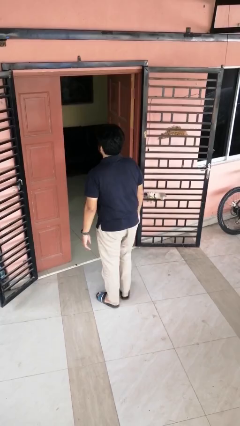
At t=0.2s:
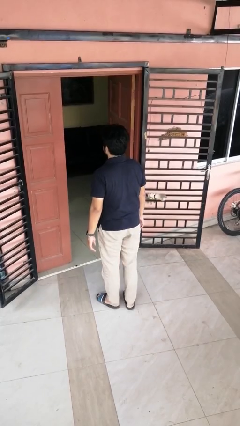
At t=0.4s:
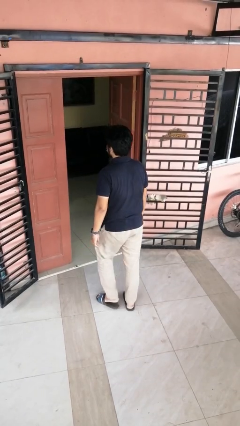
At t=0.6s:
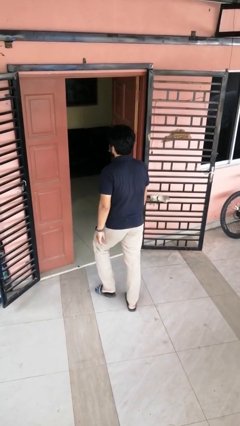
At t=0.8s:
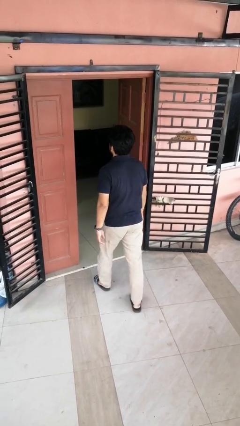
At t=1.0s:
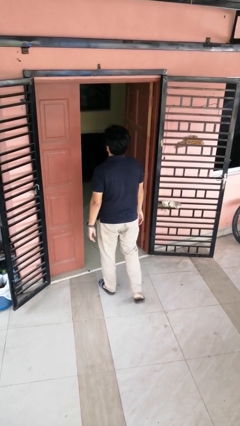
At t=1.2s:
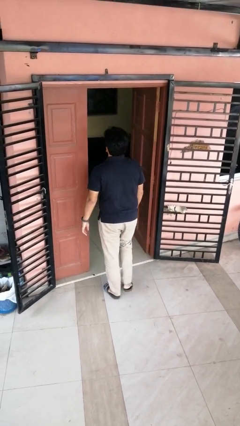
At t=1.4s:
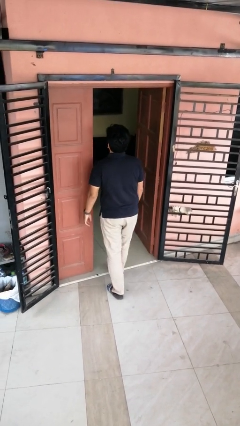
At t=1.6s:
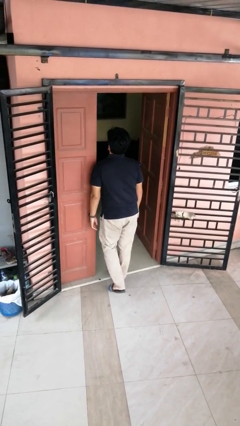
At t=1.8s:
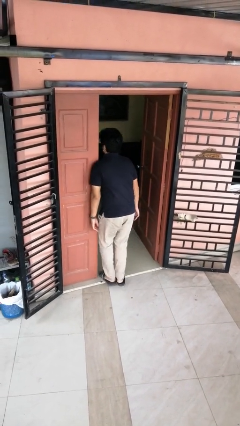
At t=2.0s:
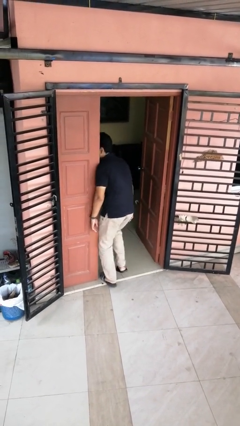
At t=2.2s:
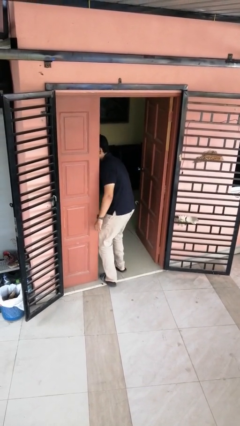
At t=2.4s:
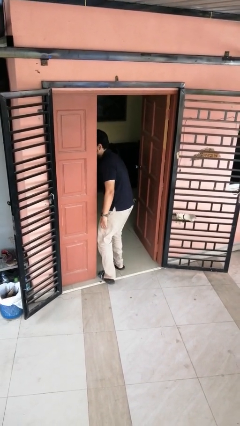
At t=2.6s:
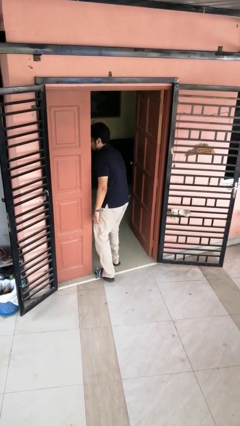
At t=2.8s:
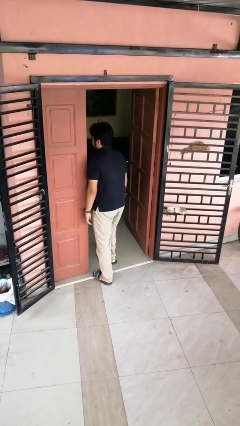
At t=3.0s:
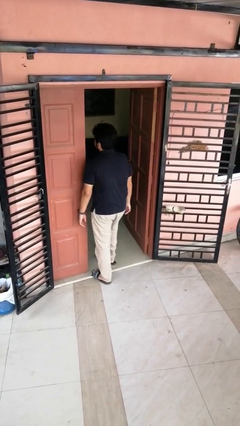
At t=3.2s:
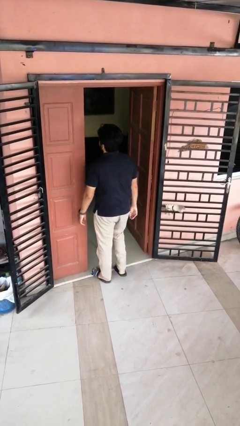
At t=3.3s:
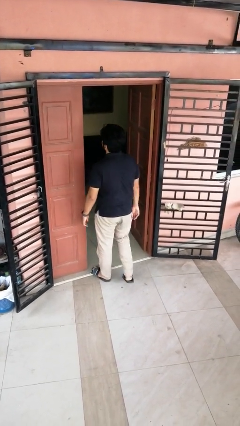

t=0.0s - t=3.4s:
person bumps into wall

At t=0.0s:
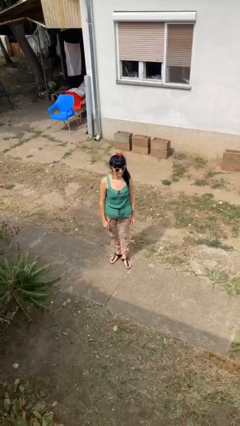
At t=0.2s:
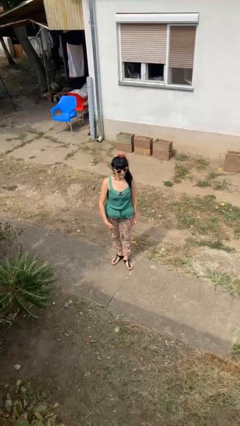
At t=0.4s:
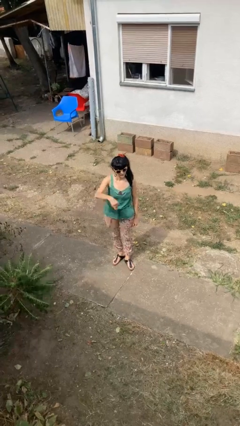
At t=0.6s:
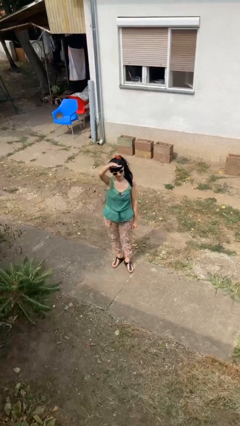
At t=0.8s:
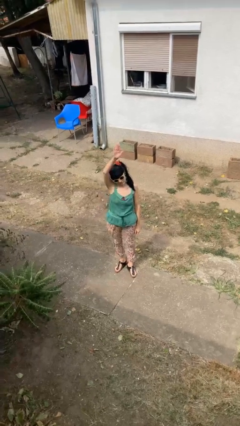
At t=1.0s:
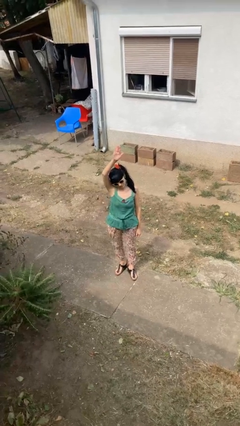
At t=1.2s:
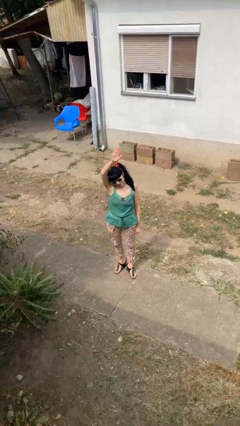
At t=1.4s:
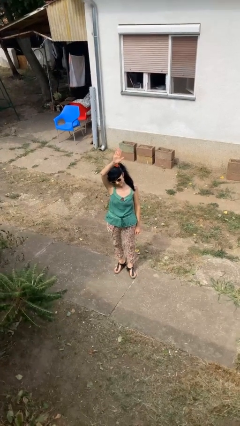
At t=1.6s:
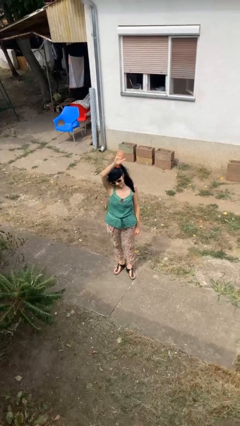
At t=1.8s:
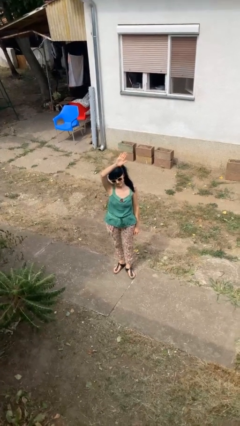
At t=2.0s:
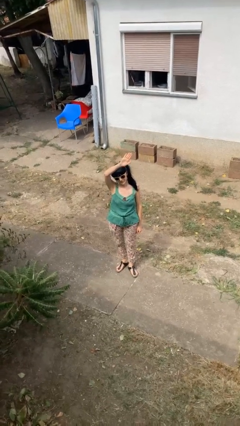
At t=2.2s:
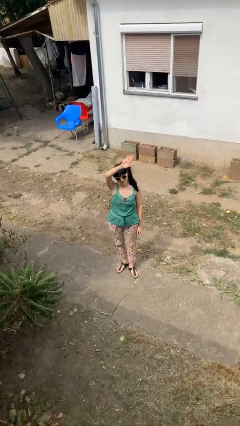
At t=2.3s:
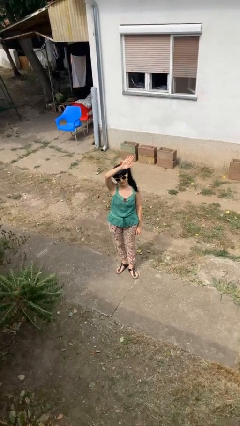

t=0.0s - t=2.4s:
person gestures raise hand

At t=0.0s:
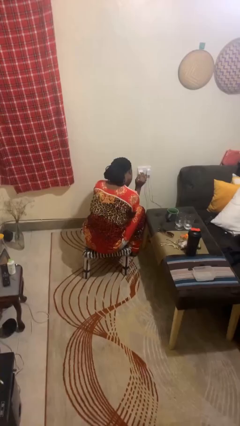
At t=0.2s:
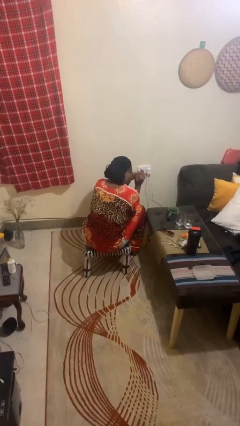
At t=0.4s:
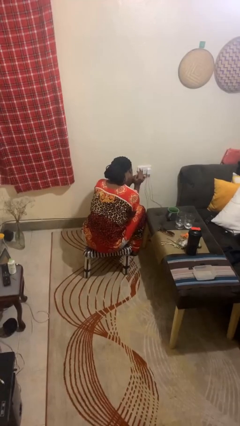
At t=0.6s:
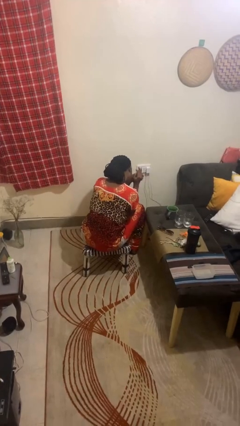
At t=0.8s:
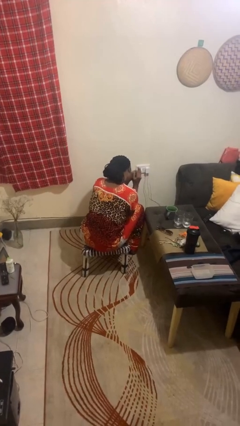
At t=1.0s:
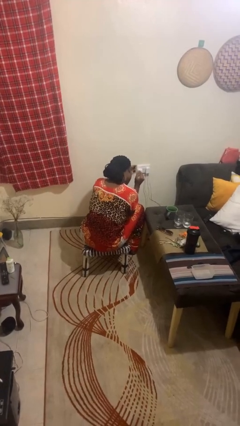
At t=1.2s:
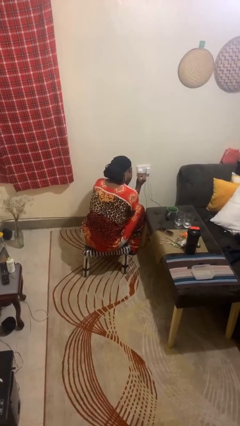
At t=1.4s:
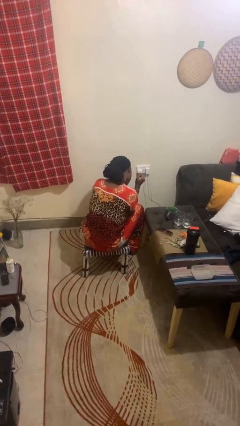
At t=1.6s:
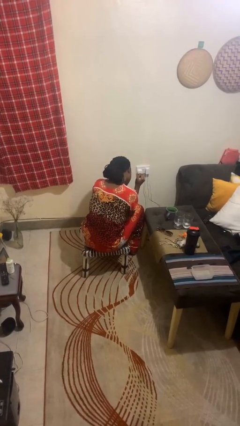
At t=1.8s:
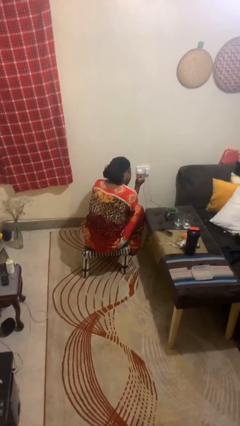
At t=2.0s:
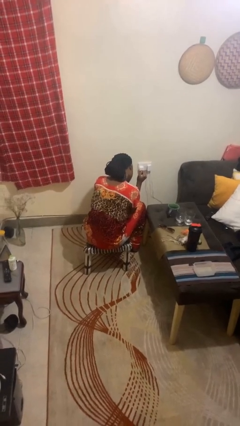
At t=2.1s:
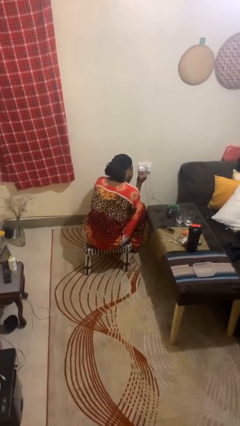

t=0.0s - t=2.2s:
person takes off ring

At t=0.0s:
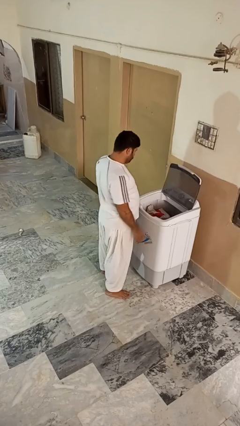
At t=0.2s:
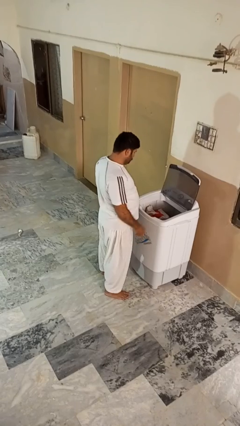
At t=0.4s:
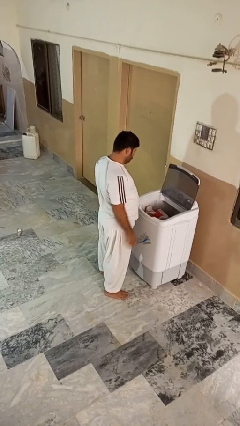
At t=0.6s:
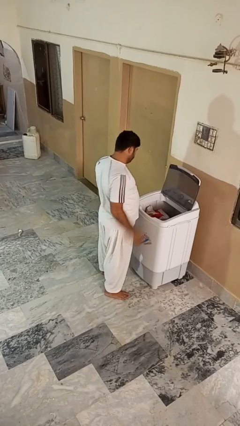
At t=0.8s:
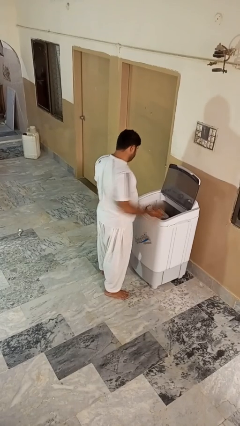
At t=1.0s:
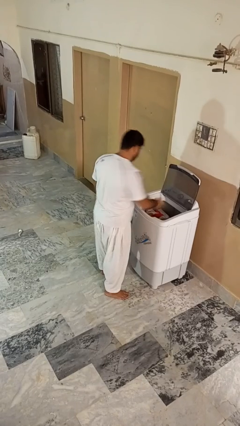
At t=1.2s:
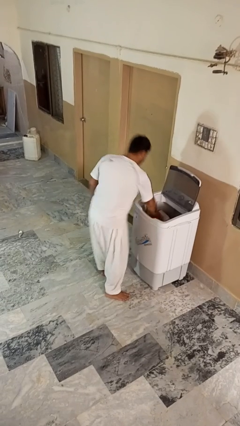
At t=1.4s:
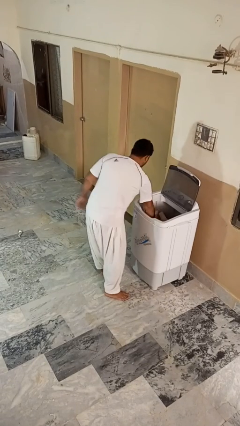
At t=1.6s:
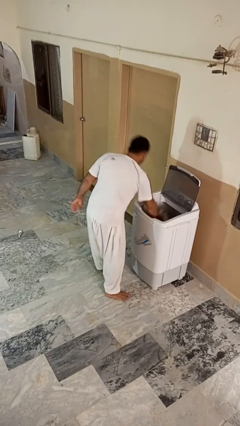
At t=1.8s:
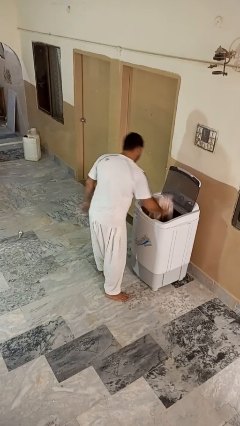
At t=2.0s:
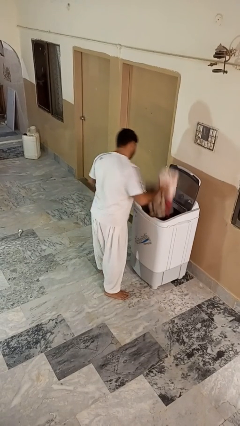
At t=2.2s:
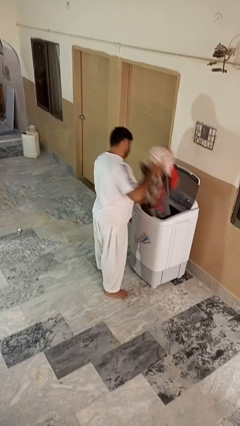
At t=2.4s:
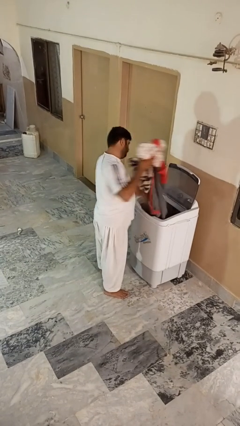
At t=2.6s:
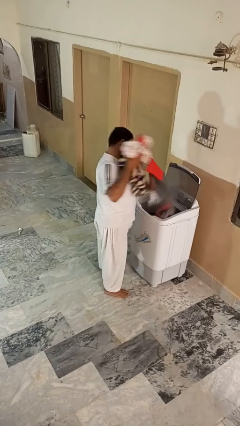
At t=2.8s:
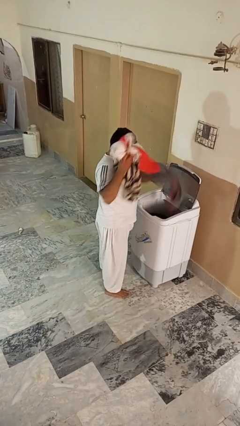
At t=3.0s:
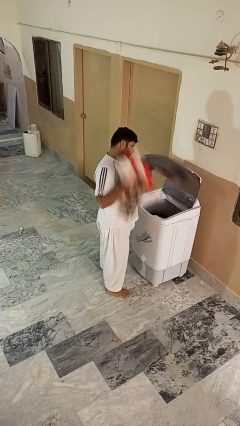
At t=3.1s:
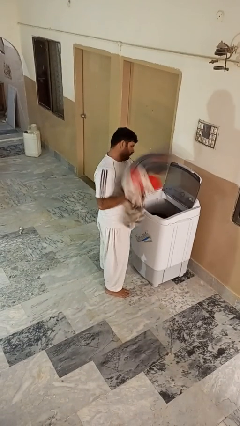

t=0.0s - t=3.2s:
person unloads clotheswasher

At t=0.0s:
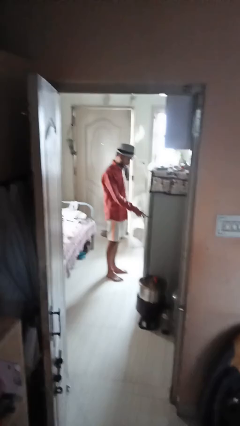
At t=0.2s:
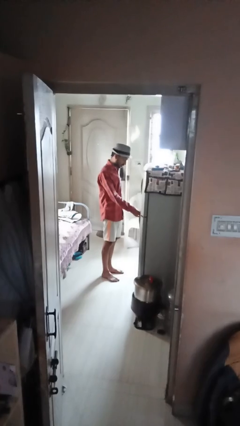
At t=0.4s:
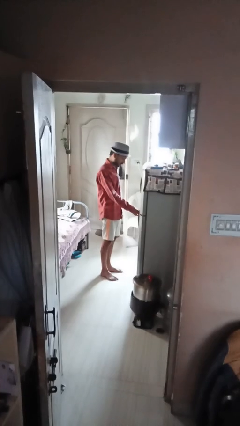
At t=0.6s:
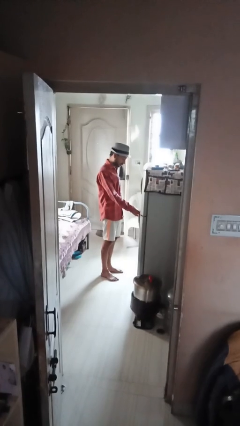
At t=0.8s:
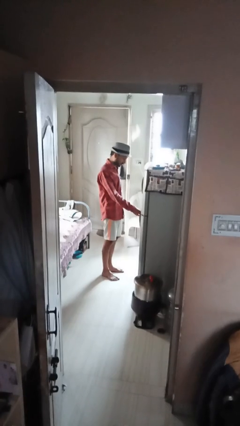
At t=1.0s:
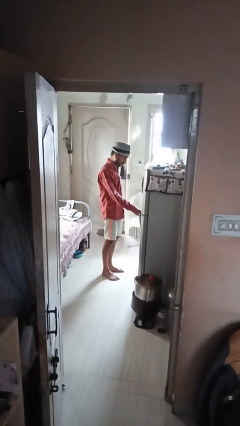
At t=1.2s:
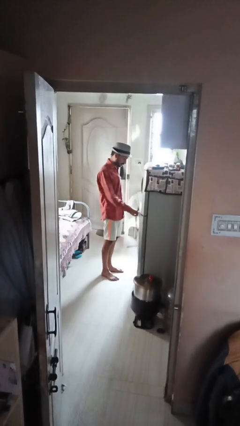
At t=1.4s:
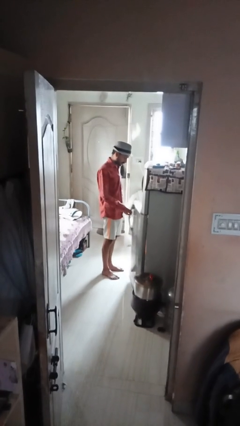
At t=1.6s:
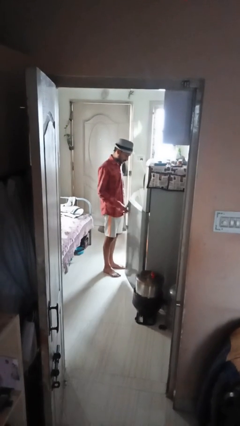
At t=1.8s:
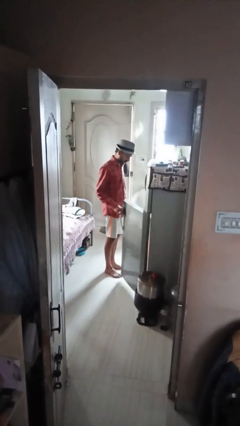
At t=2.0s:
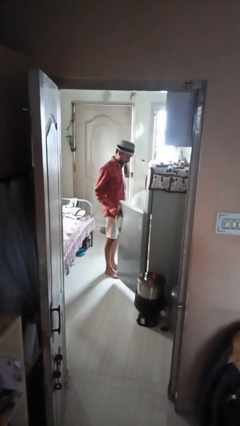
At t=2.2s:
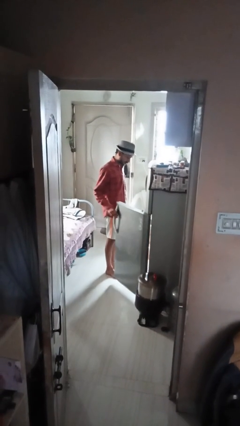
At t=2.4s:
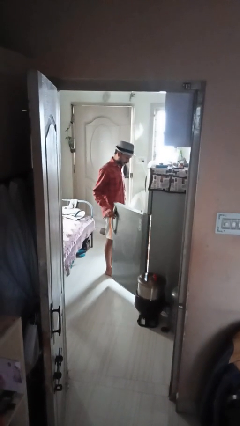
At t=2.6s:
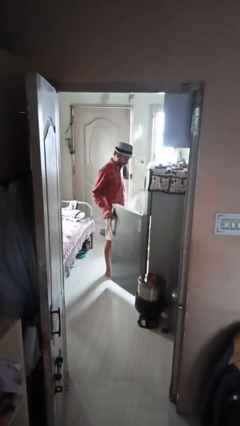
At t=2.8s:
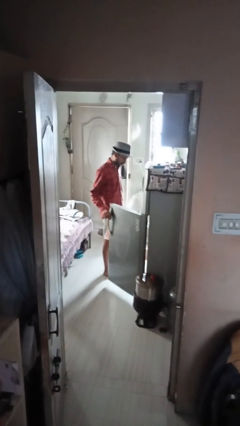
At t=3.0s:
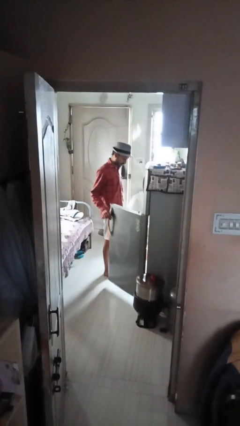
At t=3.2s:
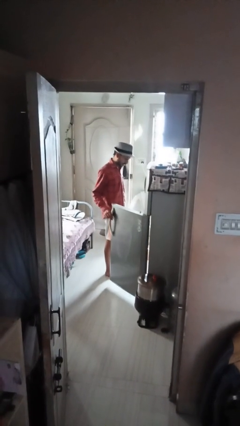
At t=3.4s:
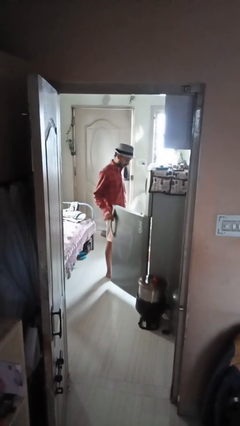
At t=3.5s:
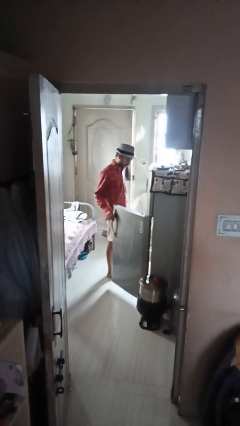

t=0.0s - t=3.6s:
person opens refrigerator

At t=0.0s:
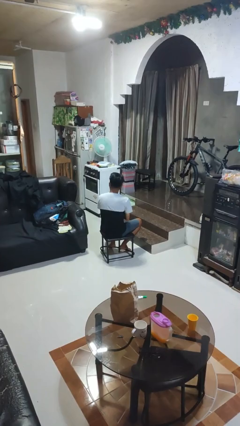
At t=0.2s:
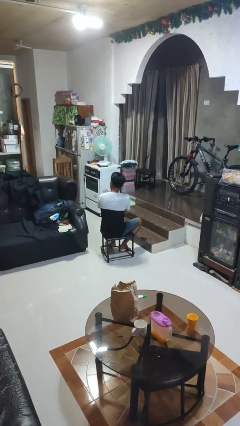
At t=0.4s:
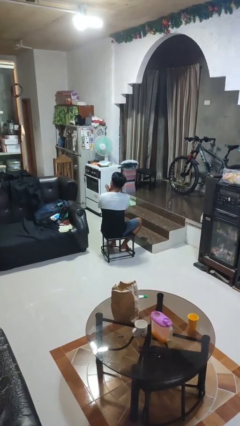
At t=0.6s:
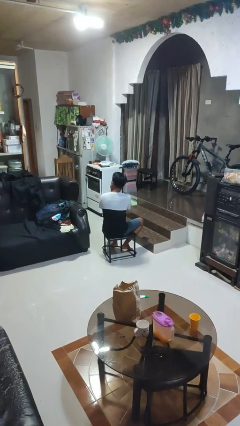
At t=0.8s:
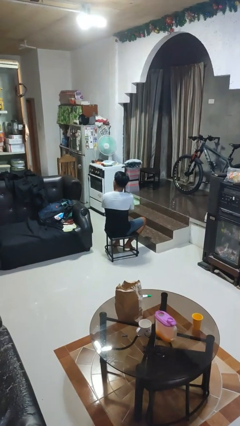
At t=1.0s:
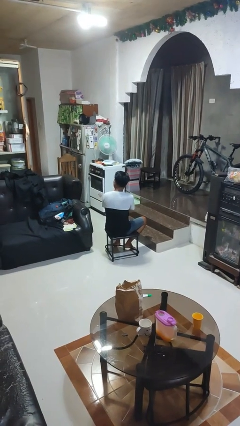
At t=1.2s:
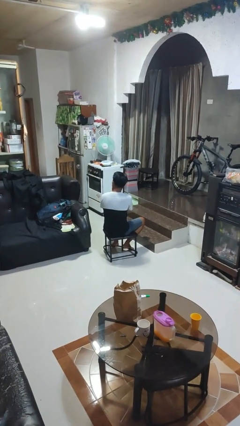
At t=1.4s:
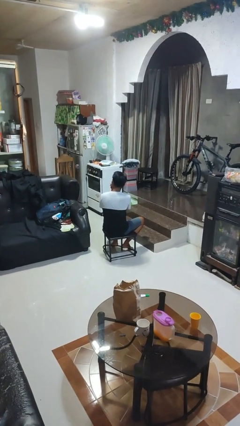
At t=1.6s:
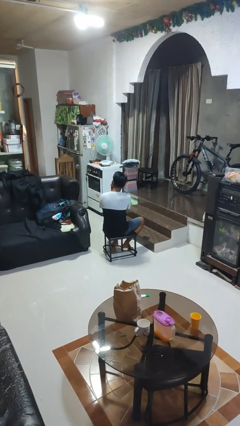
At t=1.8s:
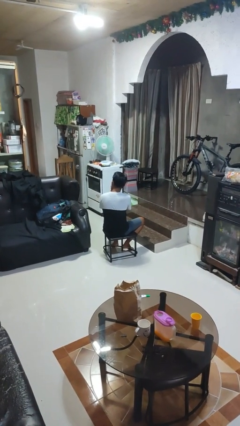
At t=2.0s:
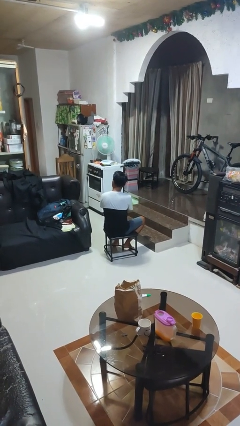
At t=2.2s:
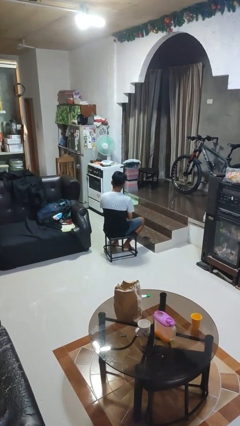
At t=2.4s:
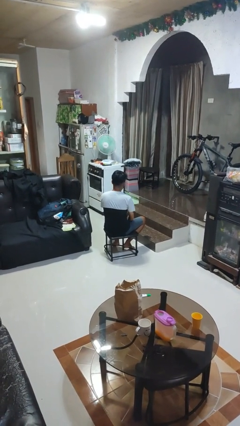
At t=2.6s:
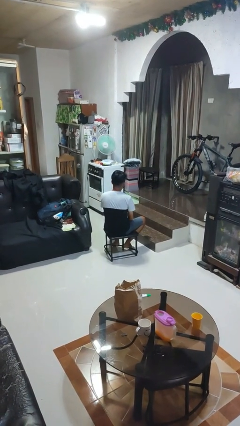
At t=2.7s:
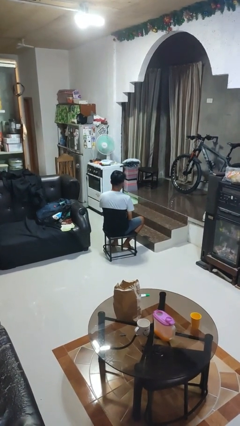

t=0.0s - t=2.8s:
person strokes chin
